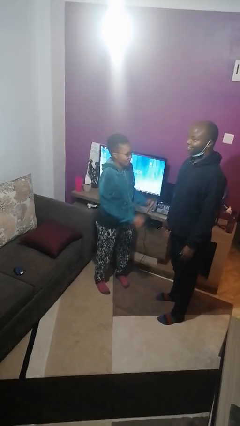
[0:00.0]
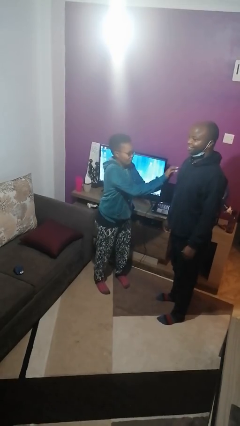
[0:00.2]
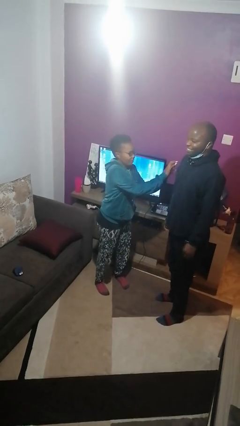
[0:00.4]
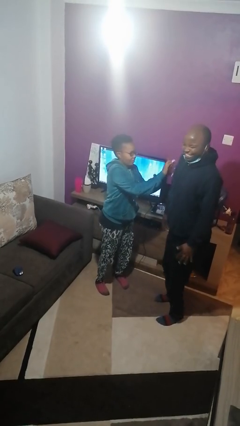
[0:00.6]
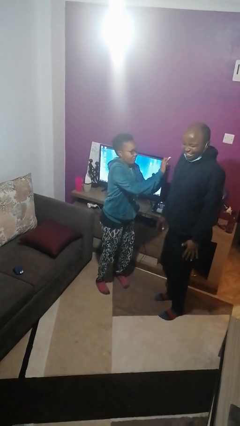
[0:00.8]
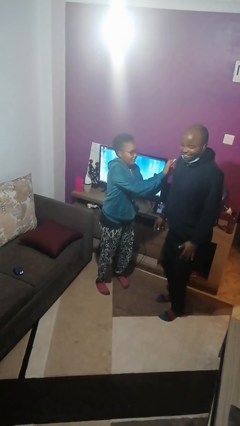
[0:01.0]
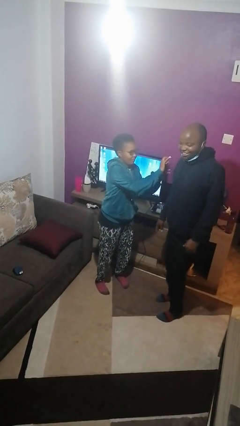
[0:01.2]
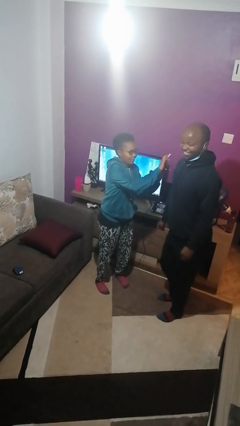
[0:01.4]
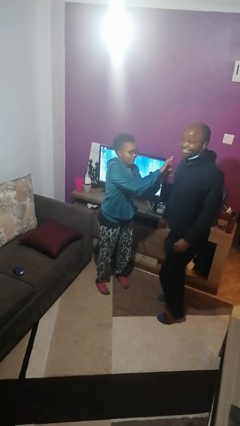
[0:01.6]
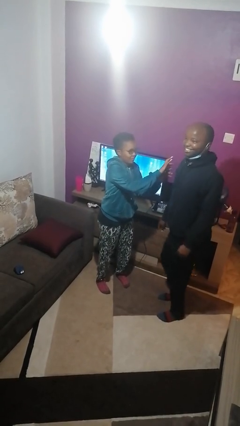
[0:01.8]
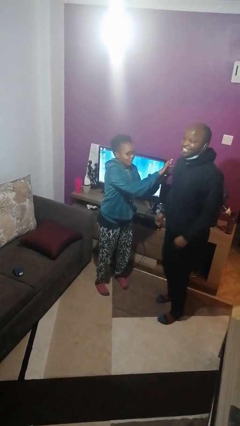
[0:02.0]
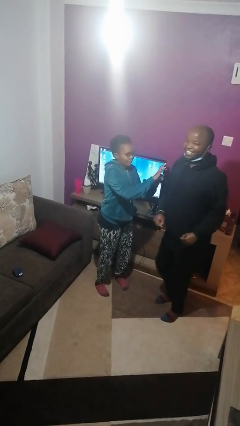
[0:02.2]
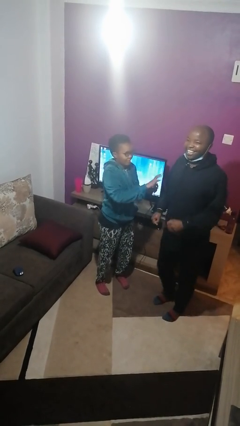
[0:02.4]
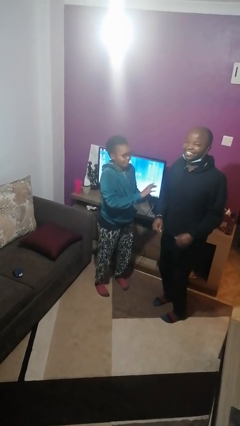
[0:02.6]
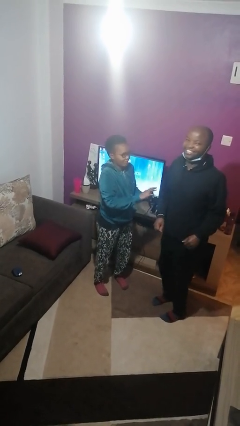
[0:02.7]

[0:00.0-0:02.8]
person tickles person

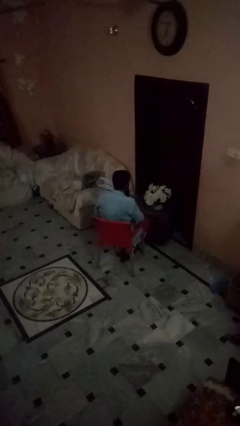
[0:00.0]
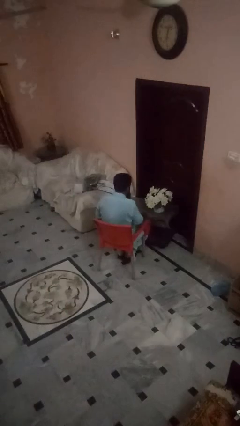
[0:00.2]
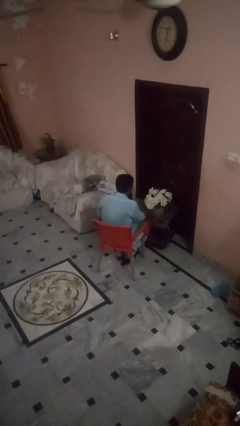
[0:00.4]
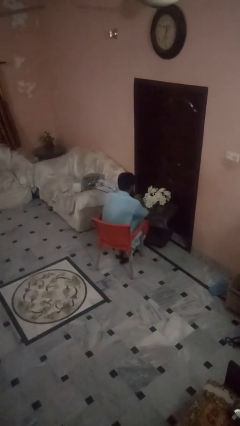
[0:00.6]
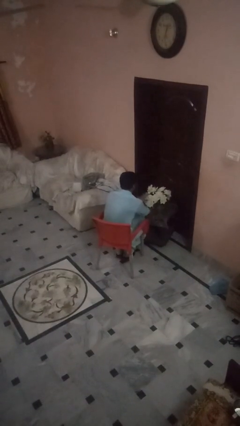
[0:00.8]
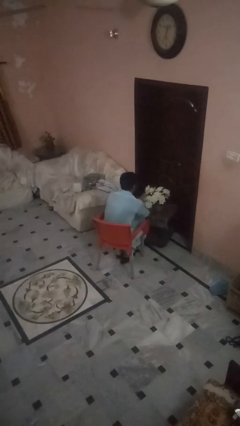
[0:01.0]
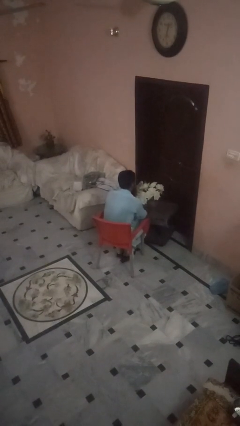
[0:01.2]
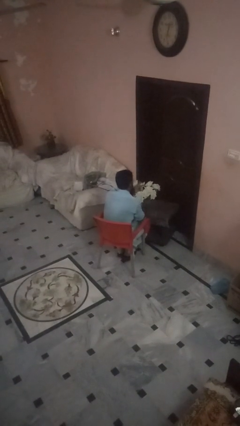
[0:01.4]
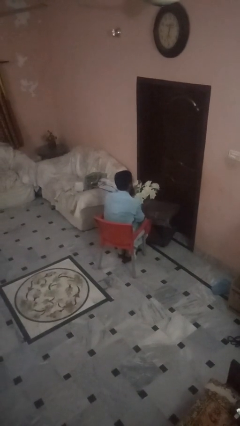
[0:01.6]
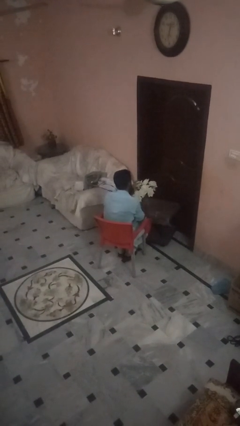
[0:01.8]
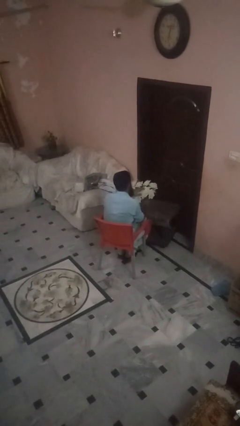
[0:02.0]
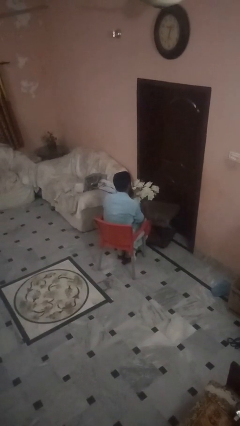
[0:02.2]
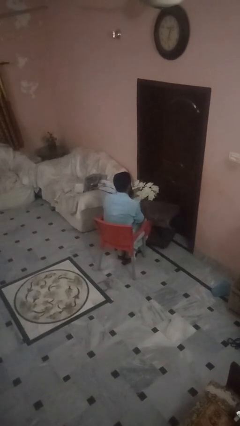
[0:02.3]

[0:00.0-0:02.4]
person arranges flowers in vase

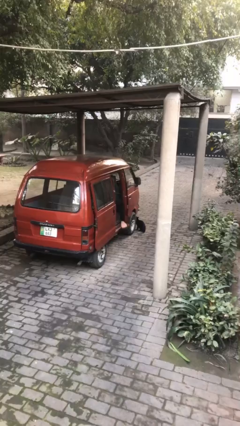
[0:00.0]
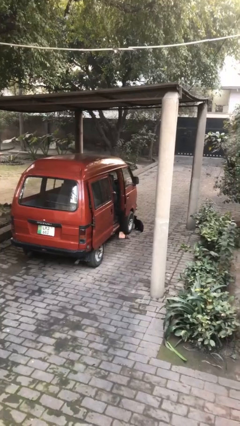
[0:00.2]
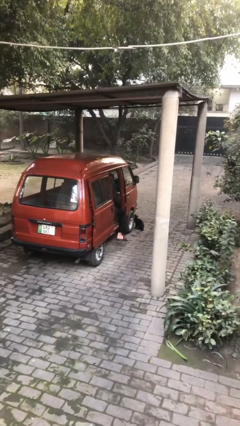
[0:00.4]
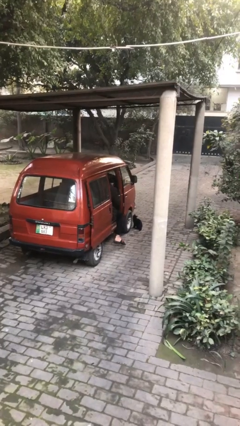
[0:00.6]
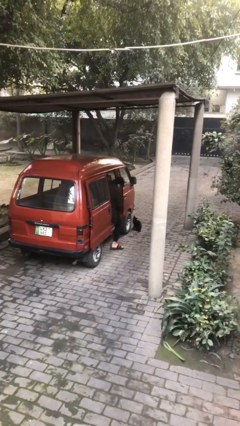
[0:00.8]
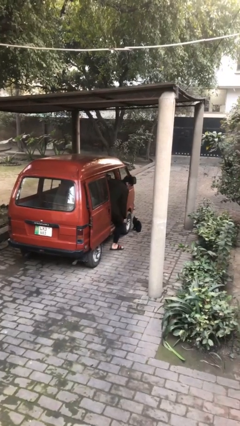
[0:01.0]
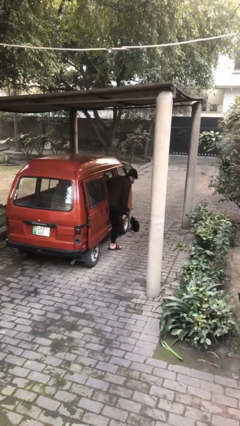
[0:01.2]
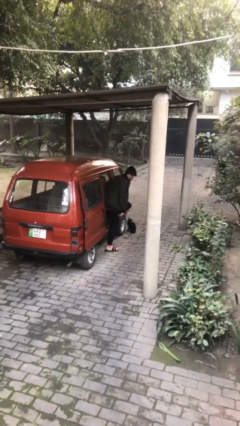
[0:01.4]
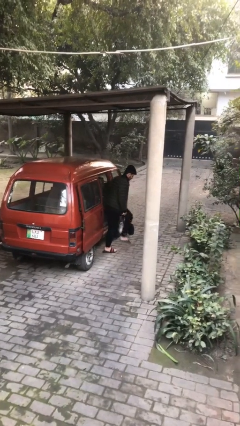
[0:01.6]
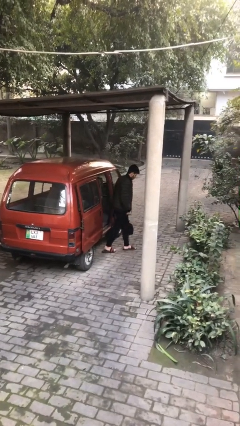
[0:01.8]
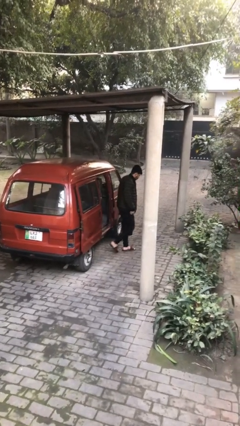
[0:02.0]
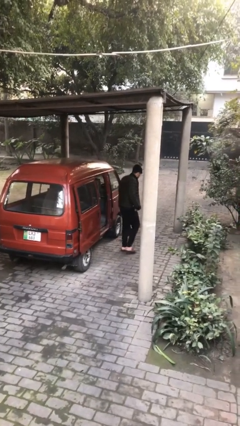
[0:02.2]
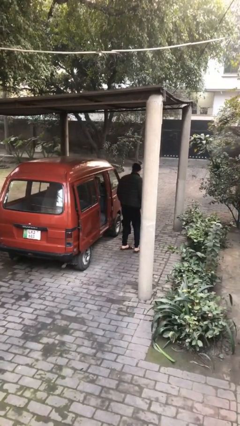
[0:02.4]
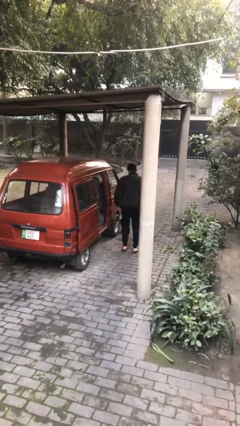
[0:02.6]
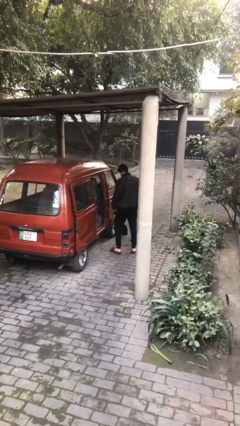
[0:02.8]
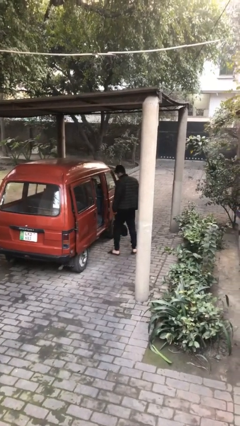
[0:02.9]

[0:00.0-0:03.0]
person exits car

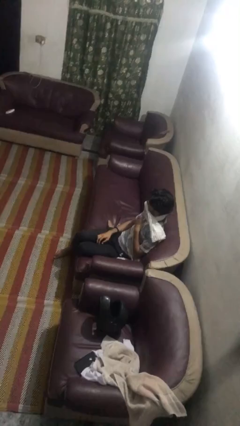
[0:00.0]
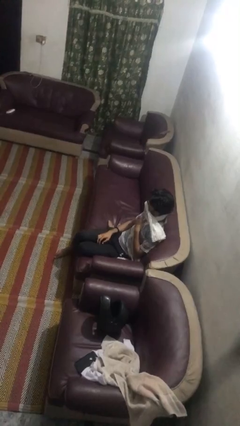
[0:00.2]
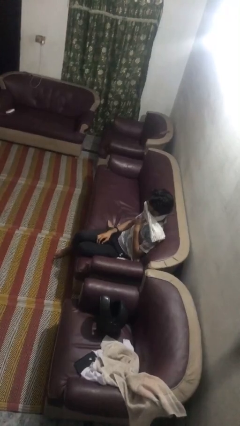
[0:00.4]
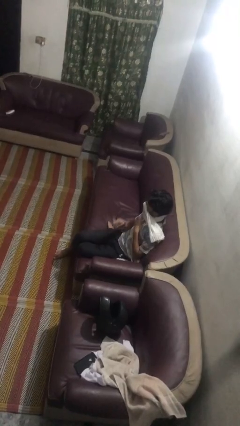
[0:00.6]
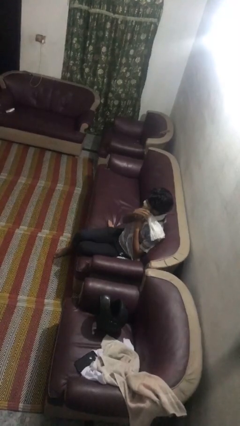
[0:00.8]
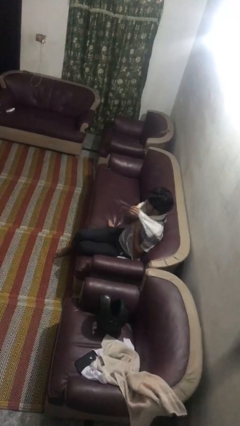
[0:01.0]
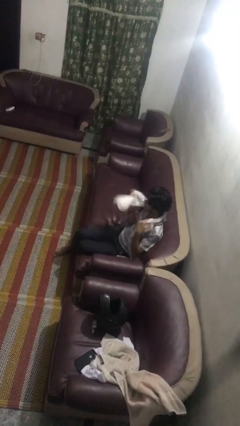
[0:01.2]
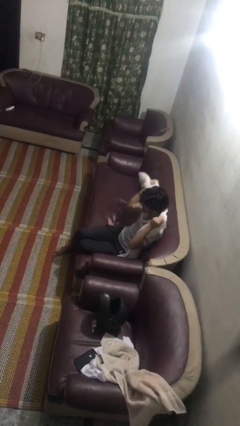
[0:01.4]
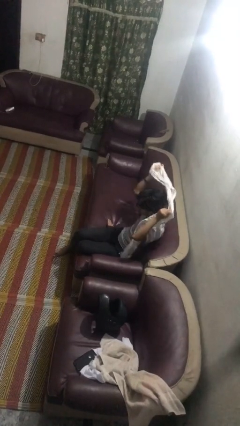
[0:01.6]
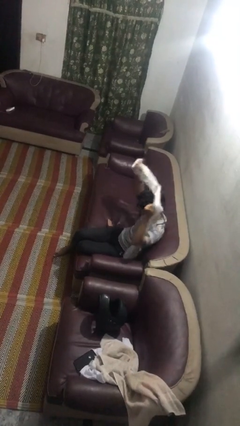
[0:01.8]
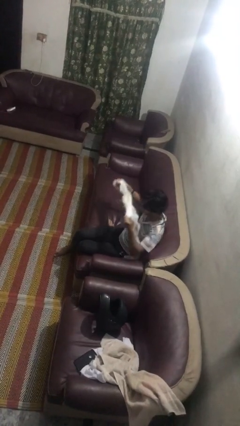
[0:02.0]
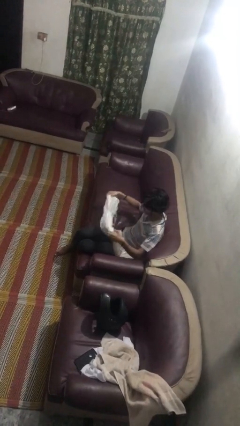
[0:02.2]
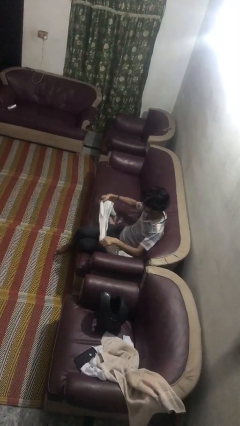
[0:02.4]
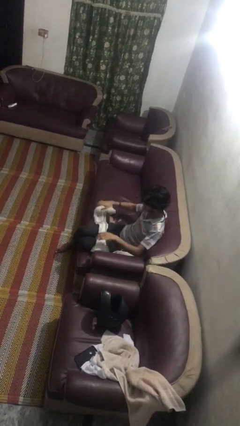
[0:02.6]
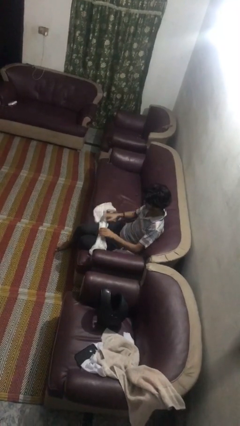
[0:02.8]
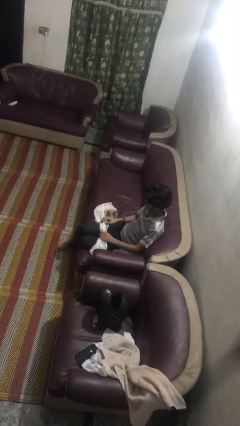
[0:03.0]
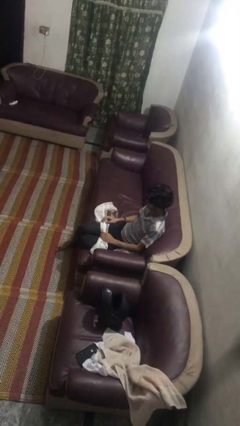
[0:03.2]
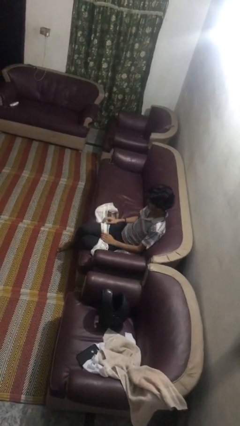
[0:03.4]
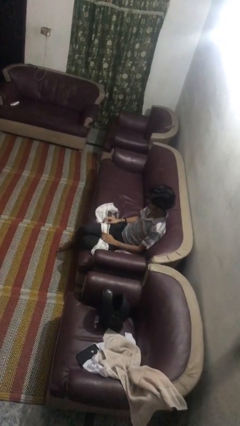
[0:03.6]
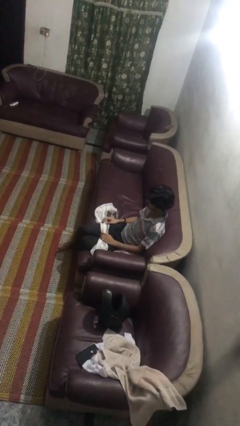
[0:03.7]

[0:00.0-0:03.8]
person takes off scarf

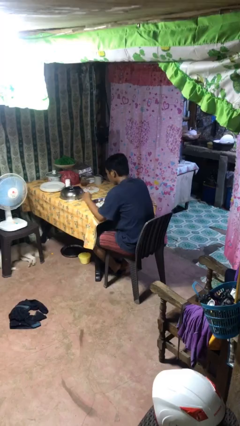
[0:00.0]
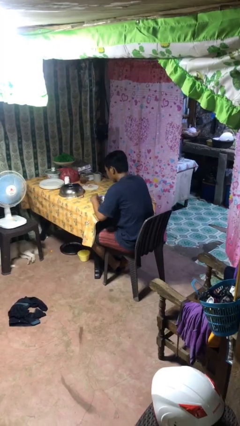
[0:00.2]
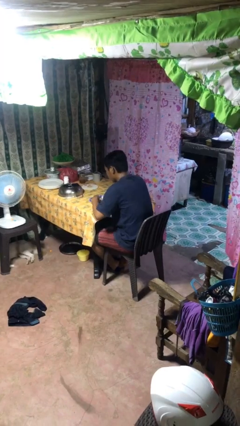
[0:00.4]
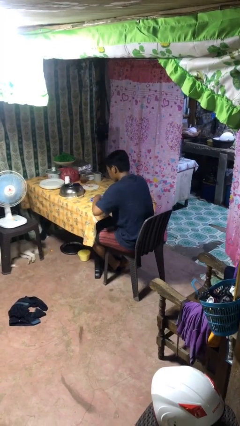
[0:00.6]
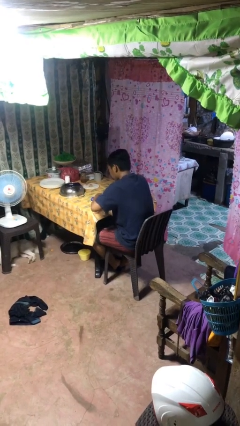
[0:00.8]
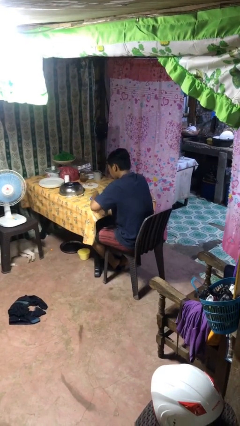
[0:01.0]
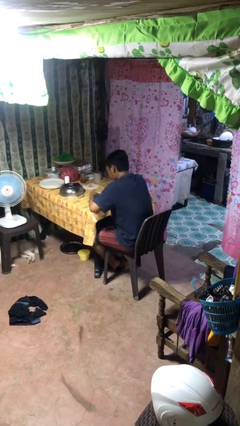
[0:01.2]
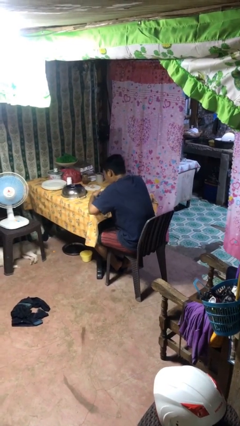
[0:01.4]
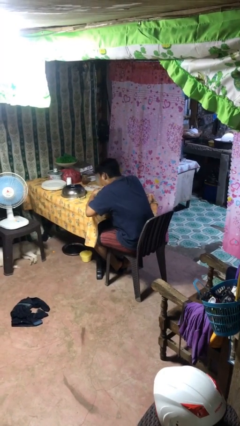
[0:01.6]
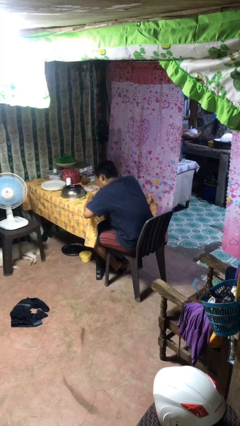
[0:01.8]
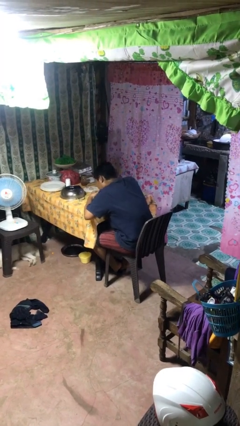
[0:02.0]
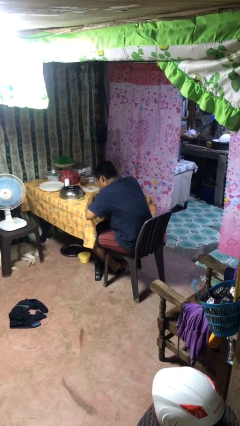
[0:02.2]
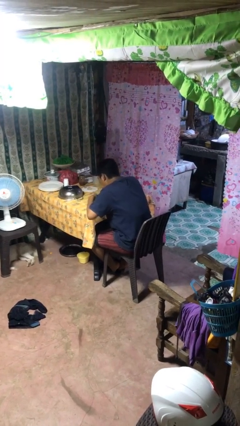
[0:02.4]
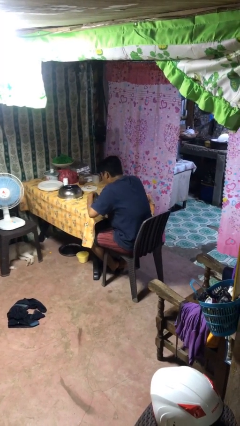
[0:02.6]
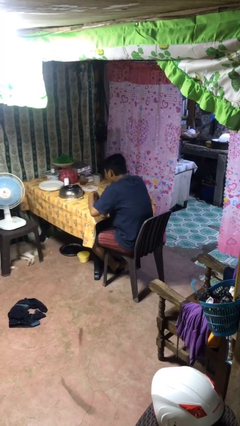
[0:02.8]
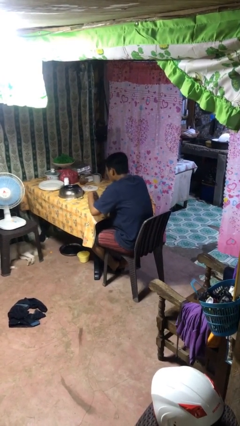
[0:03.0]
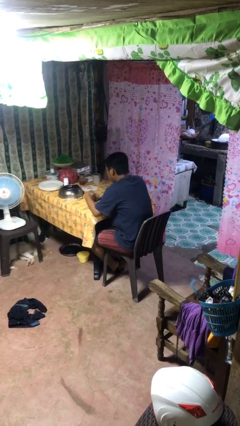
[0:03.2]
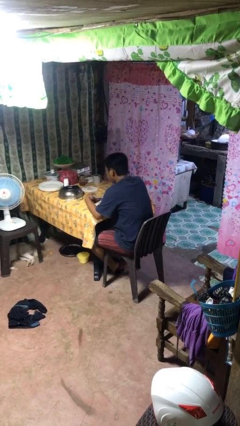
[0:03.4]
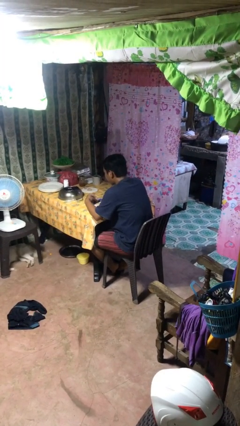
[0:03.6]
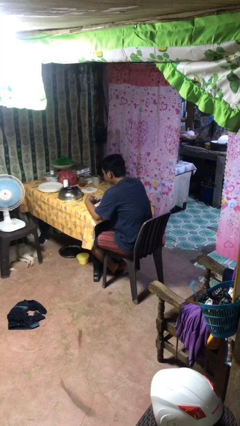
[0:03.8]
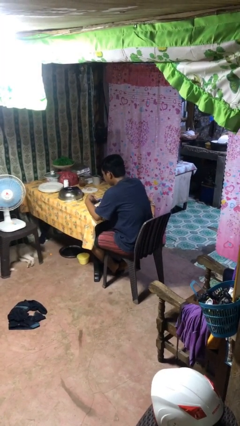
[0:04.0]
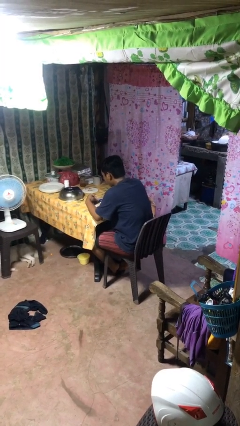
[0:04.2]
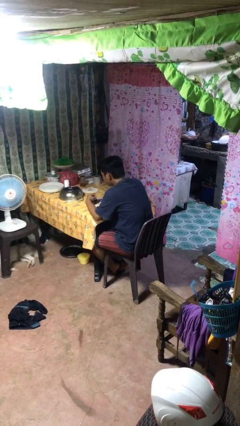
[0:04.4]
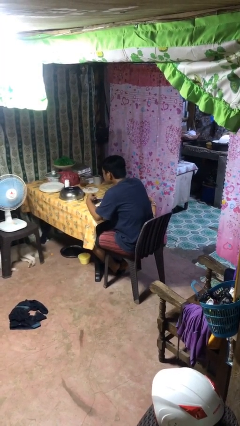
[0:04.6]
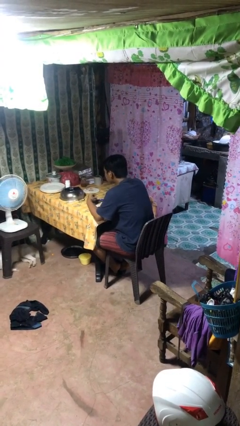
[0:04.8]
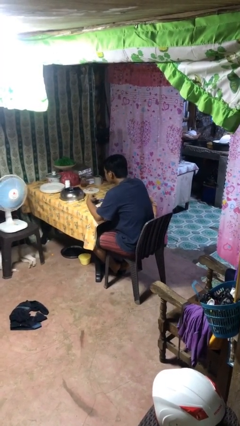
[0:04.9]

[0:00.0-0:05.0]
person eats with hands

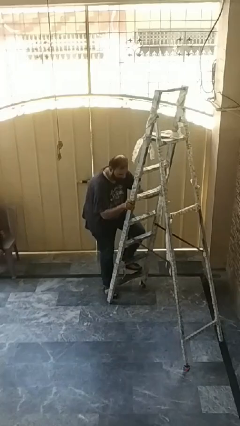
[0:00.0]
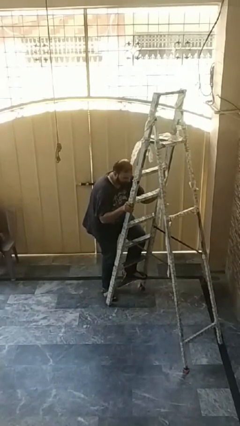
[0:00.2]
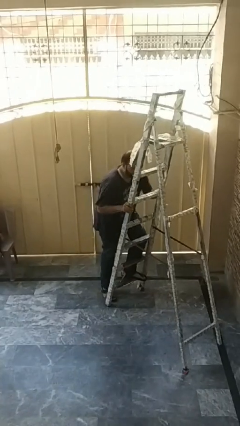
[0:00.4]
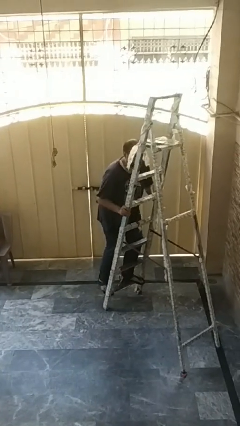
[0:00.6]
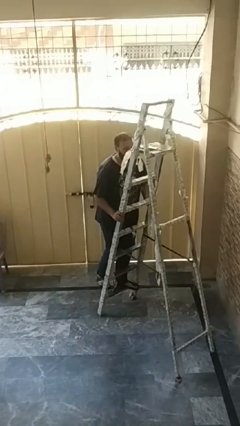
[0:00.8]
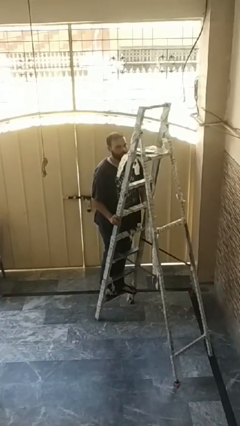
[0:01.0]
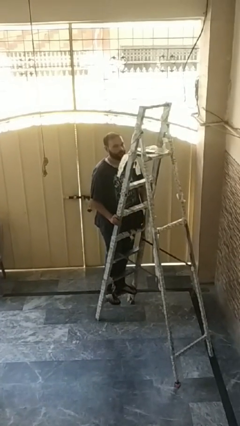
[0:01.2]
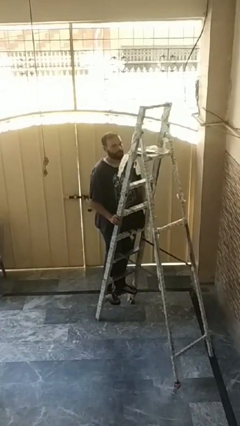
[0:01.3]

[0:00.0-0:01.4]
person climbs up ladder
